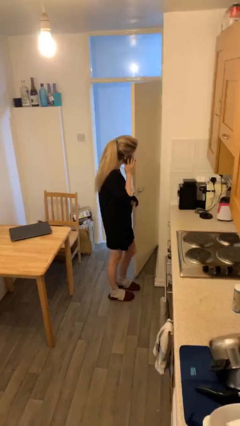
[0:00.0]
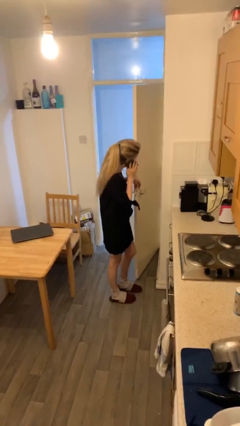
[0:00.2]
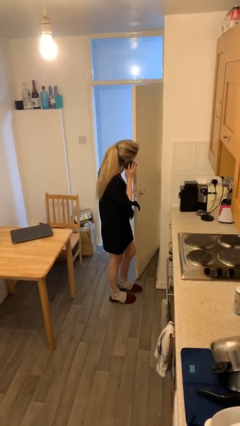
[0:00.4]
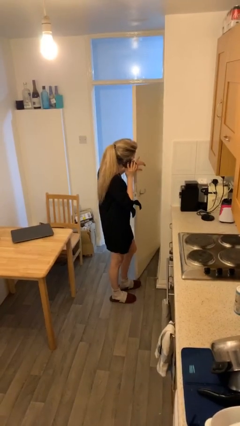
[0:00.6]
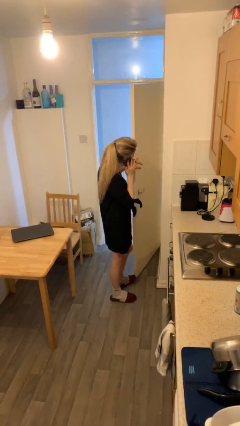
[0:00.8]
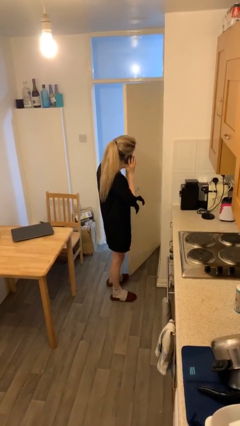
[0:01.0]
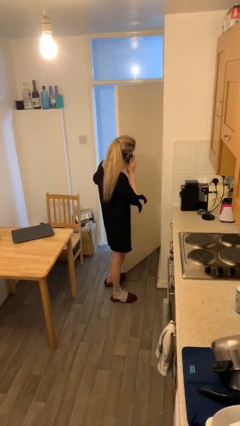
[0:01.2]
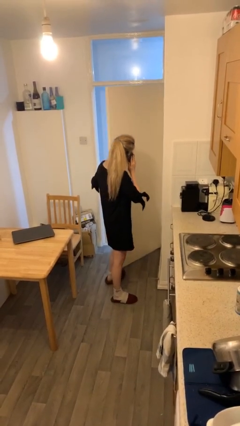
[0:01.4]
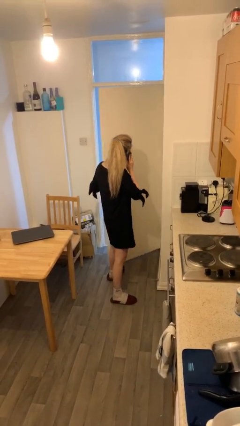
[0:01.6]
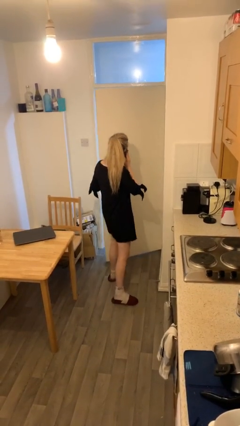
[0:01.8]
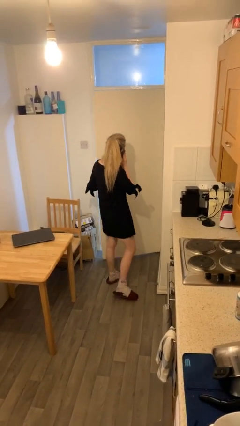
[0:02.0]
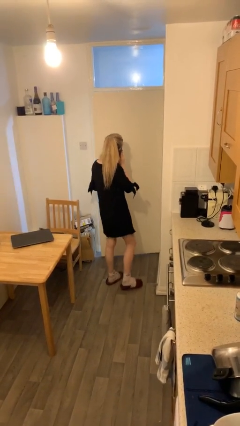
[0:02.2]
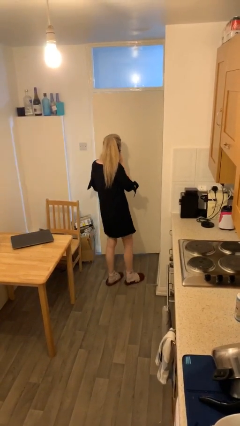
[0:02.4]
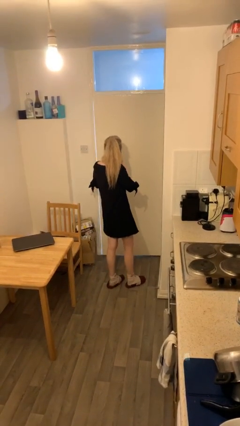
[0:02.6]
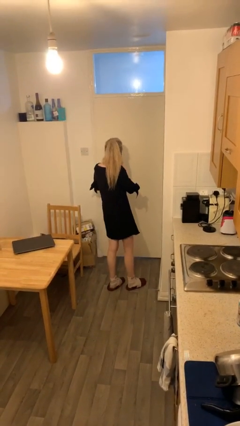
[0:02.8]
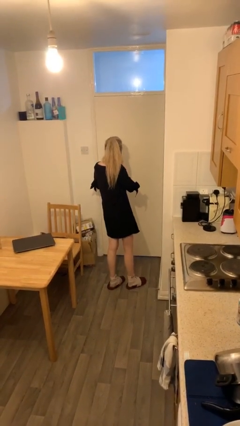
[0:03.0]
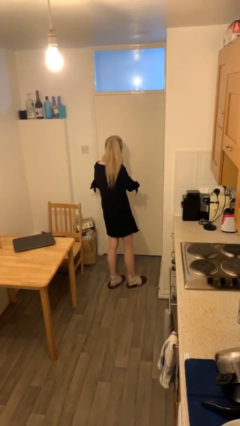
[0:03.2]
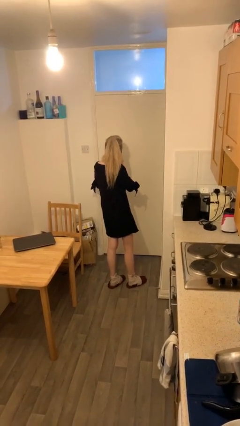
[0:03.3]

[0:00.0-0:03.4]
person closes facility door

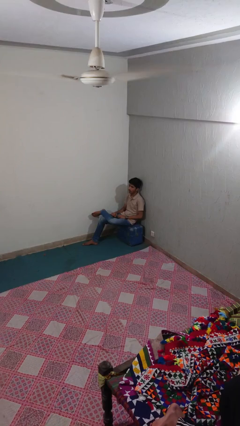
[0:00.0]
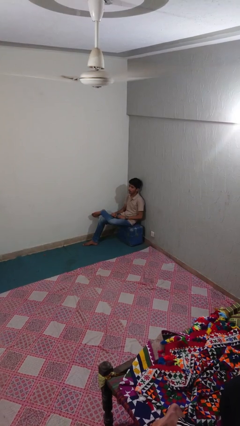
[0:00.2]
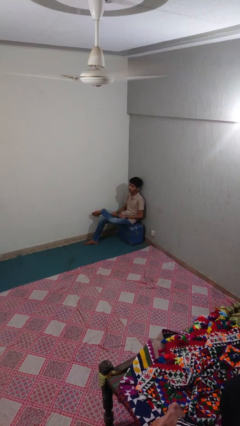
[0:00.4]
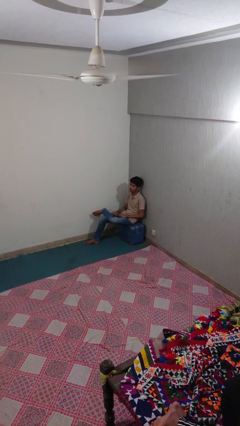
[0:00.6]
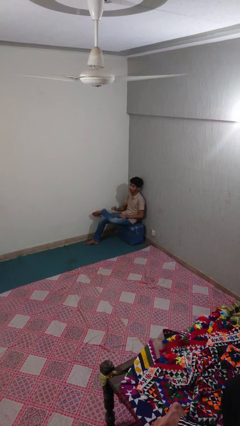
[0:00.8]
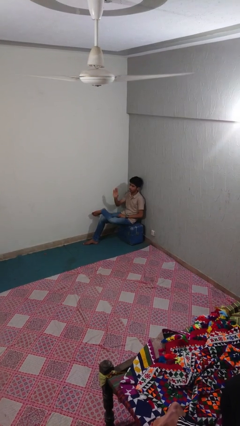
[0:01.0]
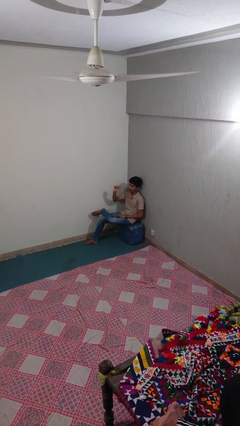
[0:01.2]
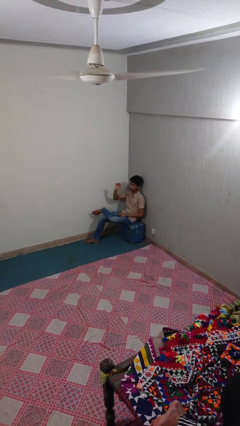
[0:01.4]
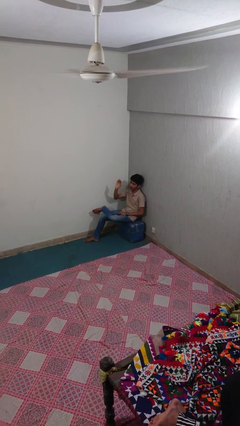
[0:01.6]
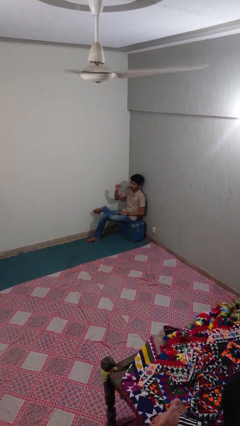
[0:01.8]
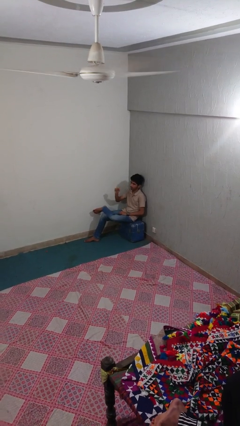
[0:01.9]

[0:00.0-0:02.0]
person gestures come here

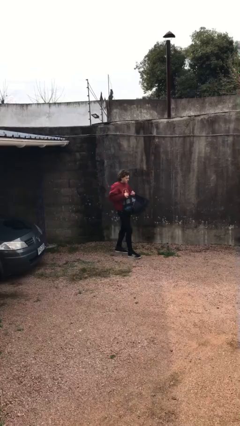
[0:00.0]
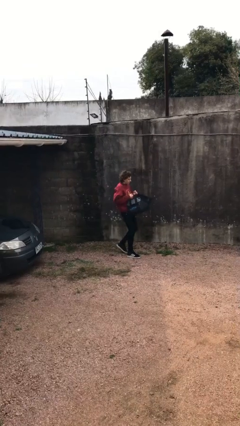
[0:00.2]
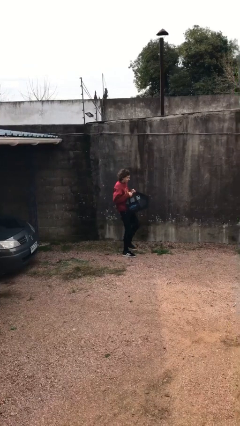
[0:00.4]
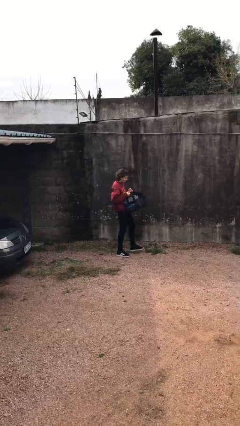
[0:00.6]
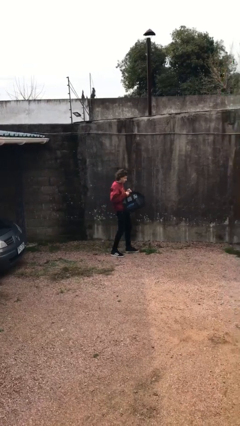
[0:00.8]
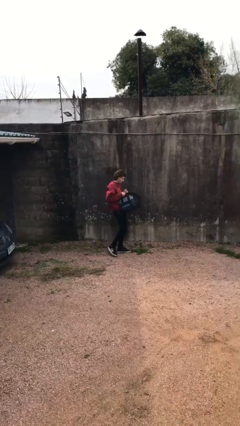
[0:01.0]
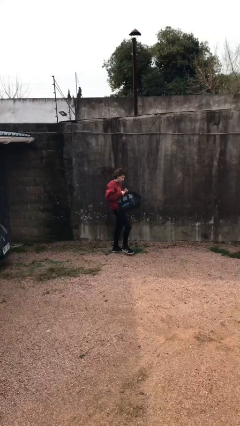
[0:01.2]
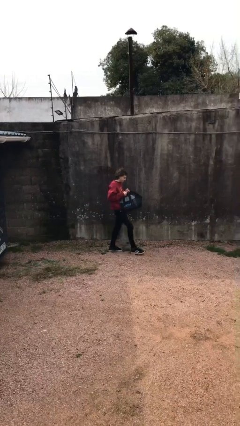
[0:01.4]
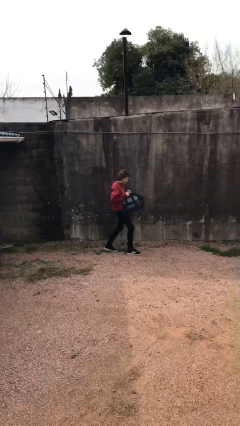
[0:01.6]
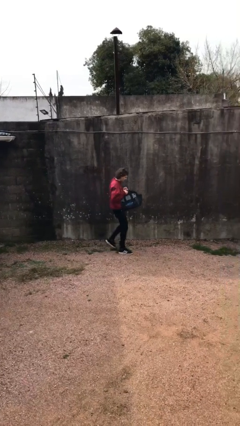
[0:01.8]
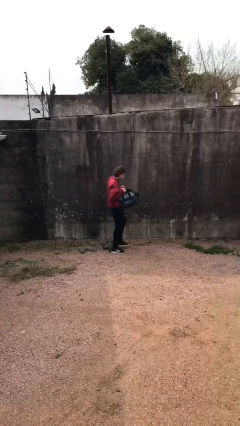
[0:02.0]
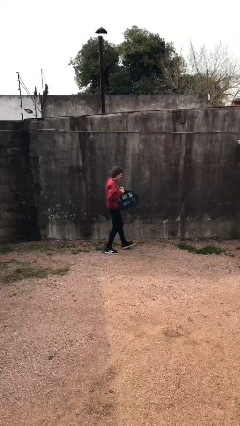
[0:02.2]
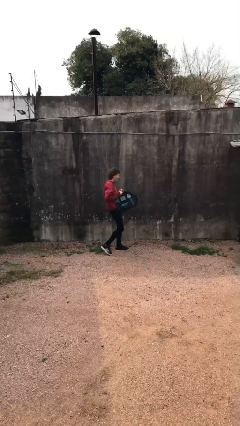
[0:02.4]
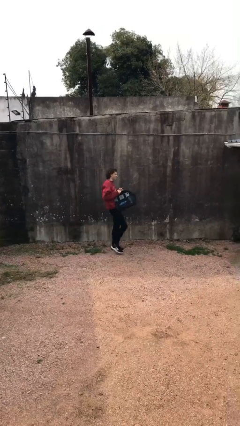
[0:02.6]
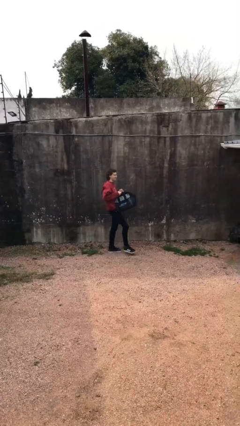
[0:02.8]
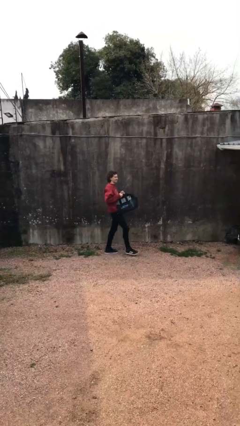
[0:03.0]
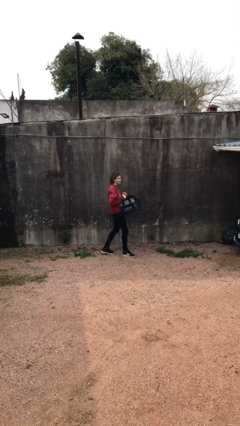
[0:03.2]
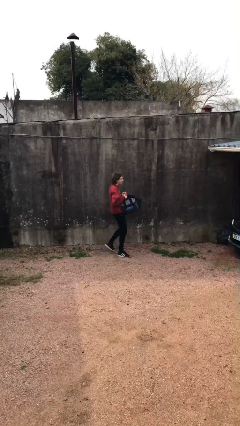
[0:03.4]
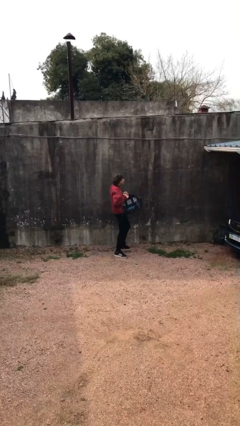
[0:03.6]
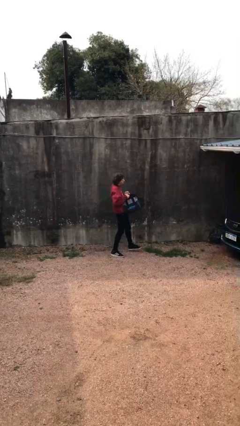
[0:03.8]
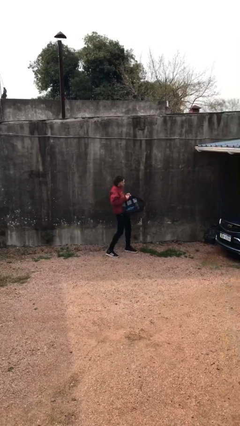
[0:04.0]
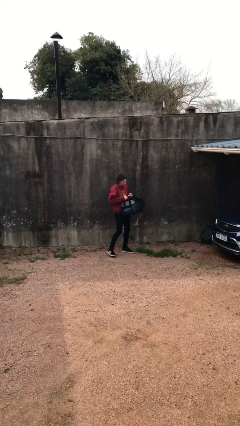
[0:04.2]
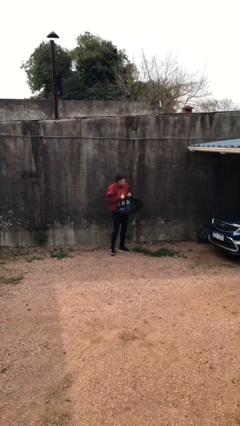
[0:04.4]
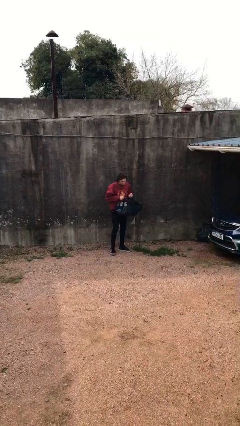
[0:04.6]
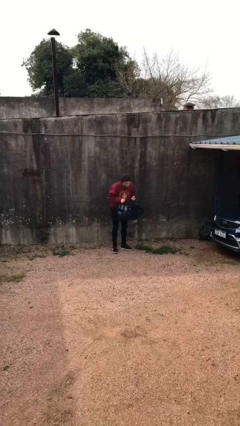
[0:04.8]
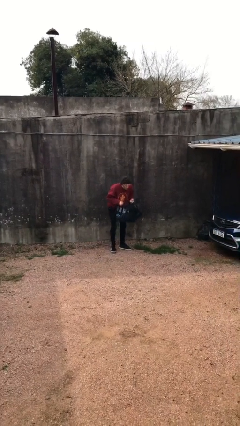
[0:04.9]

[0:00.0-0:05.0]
person carries heavy object

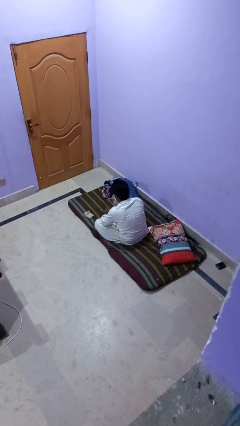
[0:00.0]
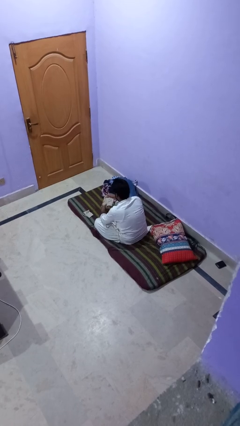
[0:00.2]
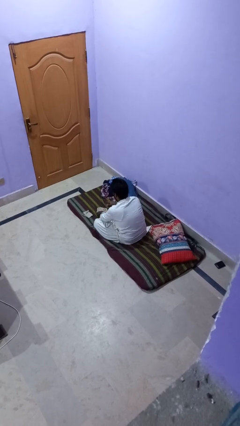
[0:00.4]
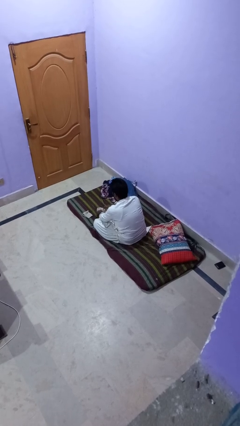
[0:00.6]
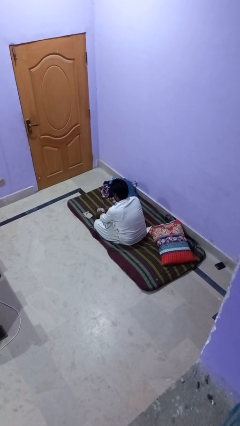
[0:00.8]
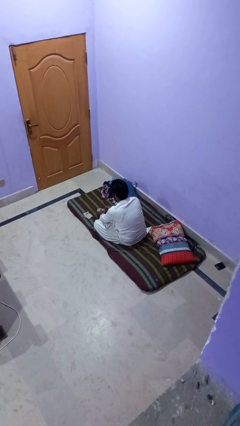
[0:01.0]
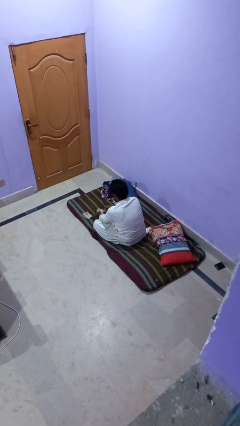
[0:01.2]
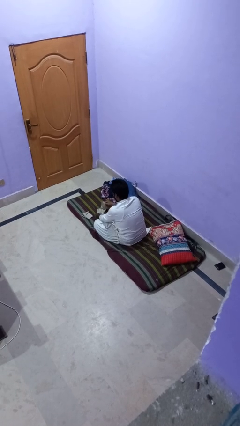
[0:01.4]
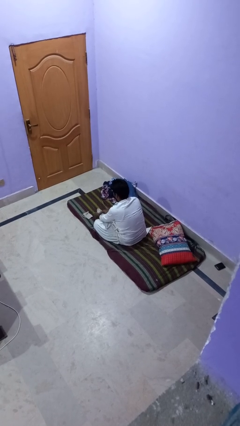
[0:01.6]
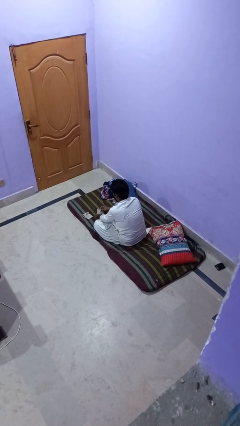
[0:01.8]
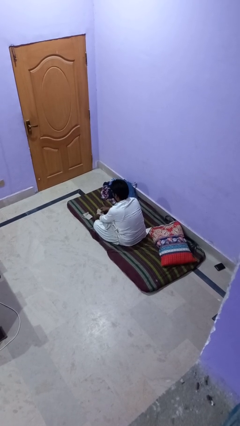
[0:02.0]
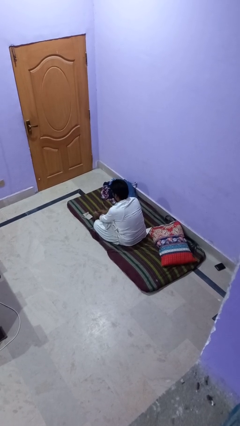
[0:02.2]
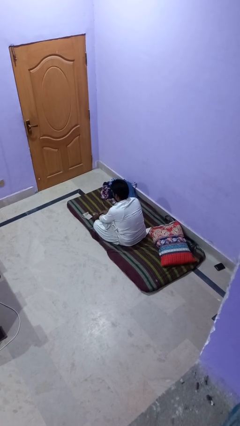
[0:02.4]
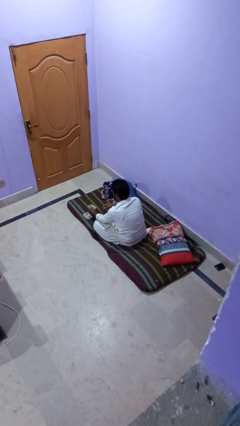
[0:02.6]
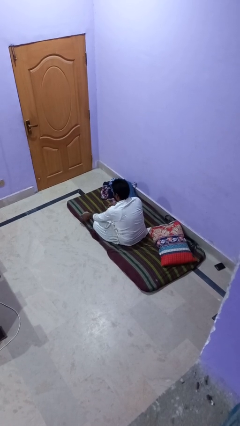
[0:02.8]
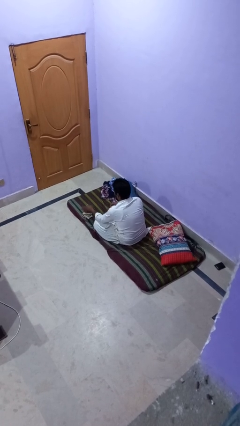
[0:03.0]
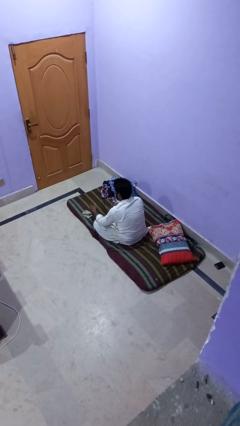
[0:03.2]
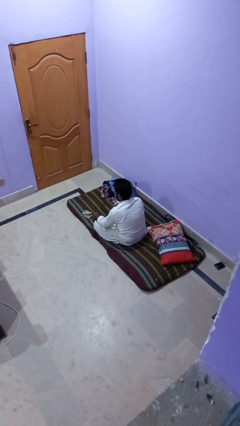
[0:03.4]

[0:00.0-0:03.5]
person folds socks

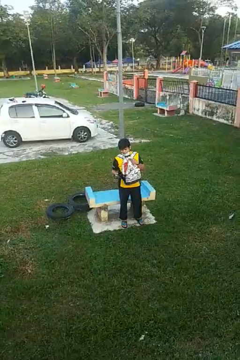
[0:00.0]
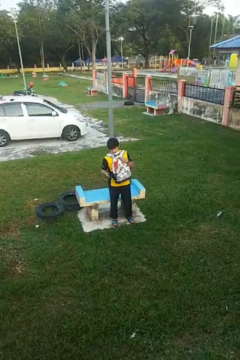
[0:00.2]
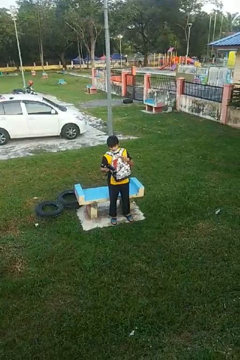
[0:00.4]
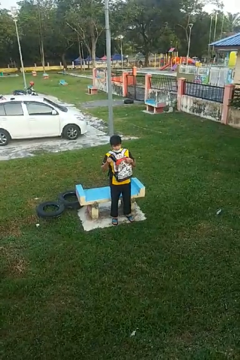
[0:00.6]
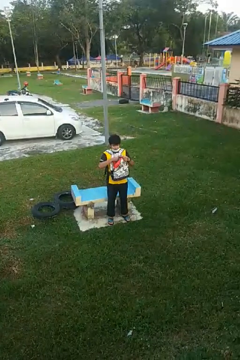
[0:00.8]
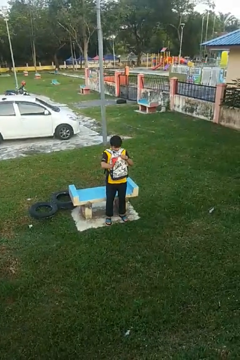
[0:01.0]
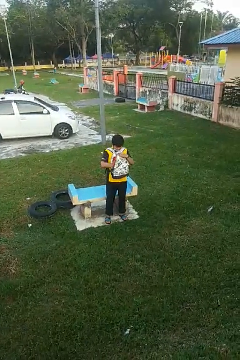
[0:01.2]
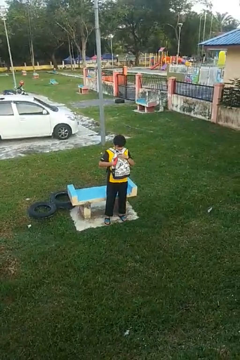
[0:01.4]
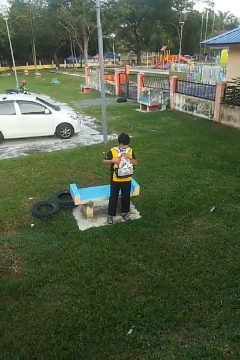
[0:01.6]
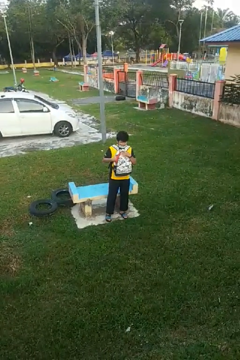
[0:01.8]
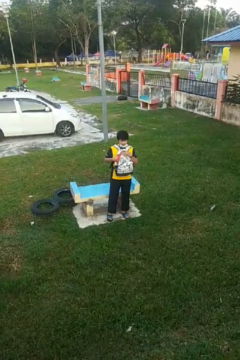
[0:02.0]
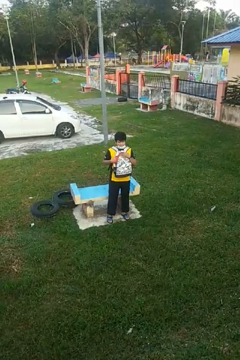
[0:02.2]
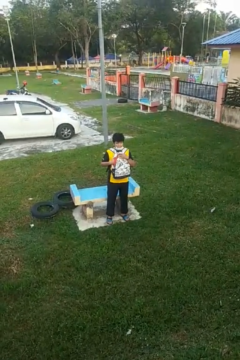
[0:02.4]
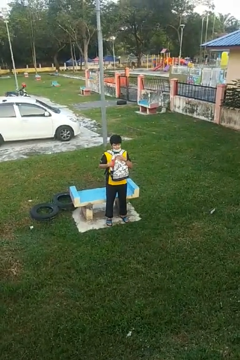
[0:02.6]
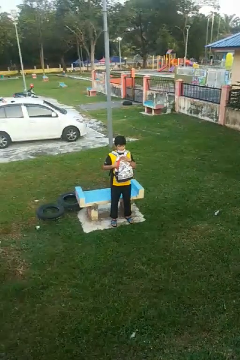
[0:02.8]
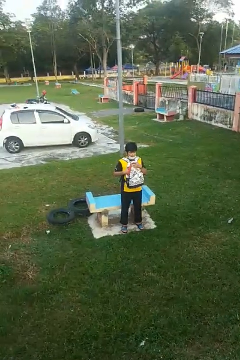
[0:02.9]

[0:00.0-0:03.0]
person puts on facemask

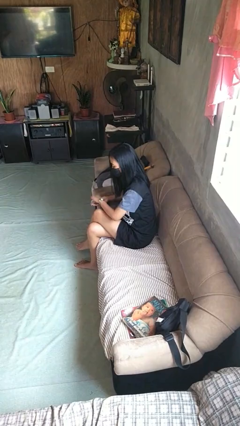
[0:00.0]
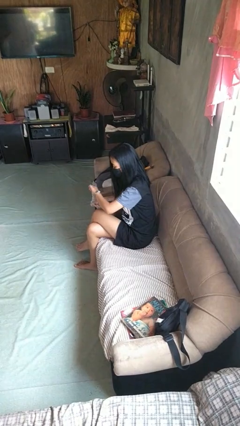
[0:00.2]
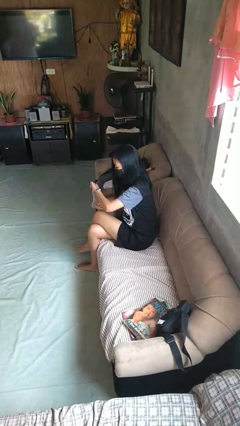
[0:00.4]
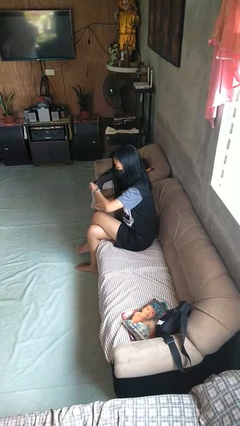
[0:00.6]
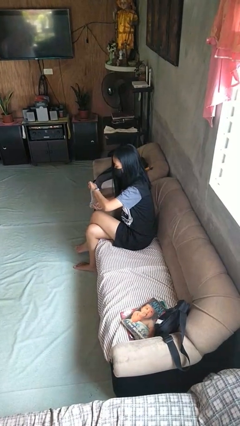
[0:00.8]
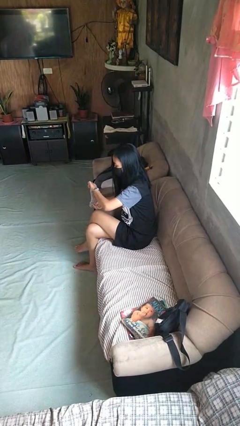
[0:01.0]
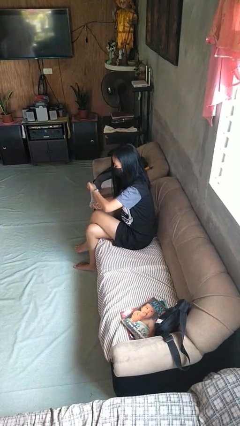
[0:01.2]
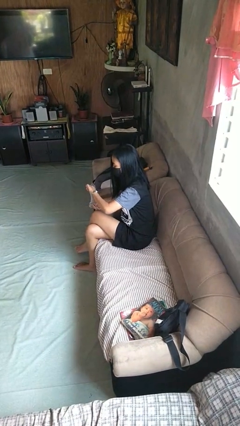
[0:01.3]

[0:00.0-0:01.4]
person looks at wristwatch
